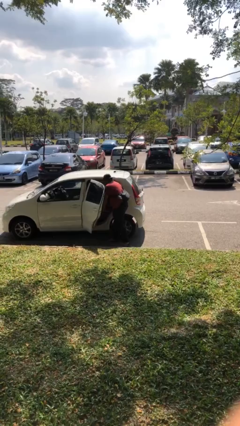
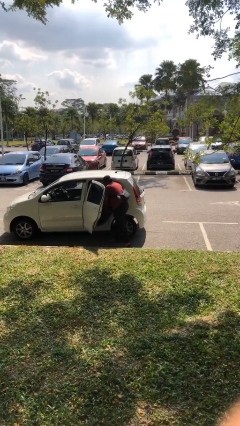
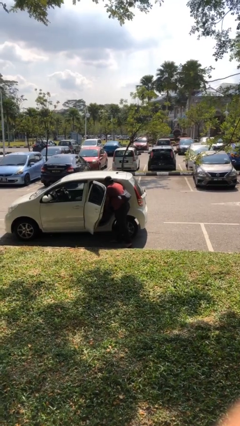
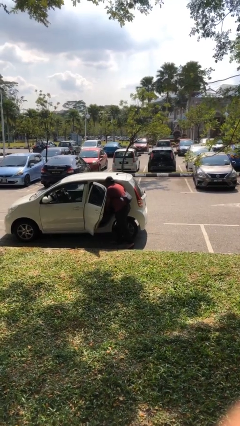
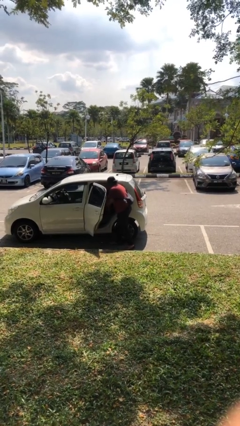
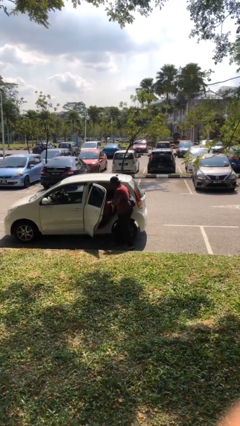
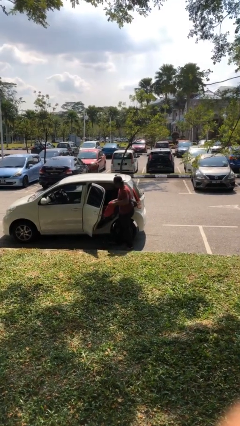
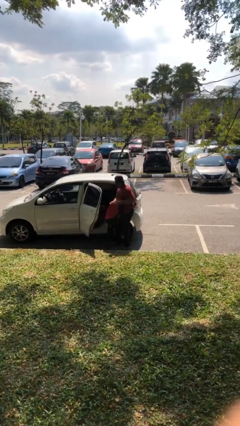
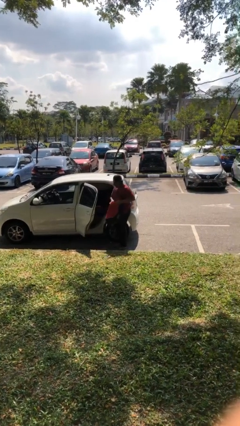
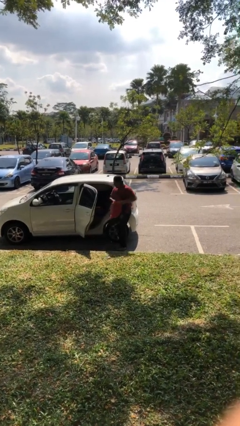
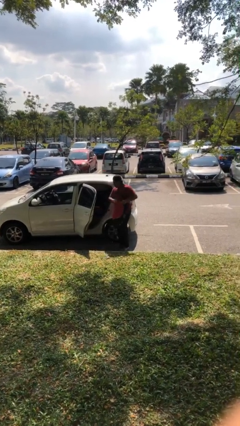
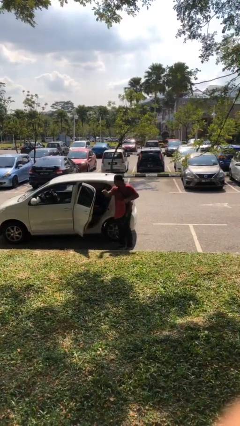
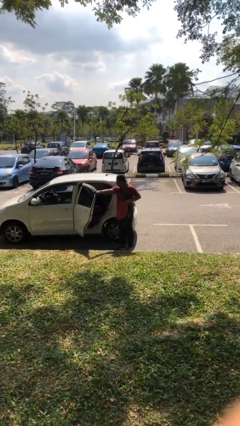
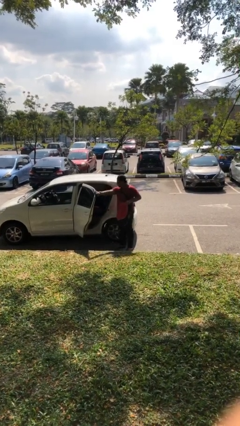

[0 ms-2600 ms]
person unloads car

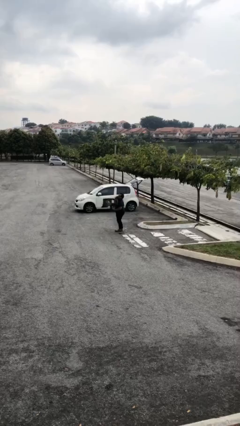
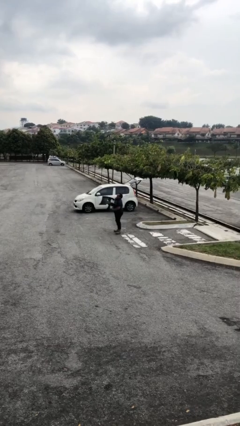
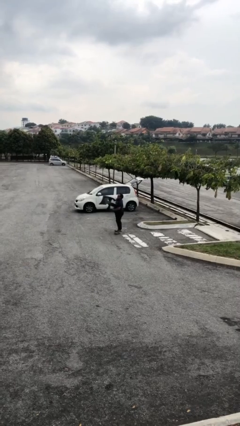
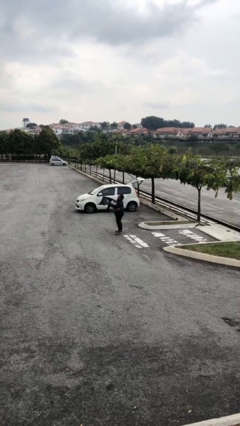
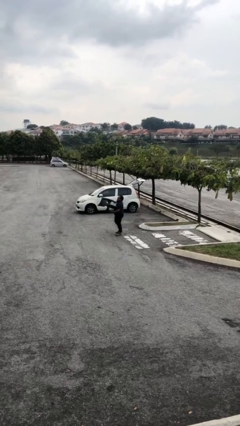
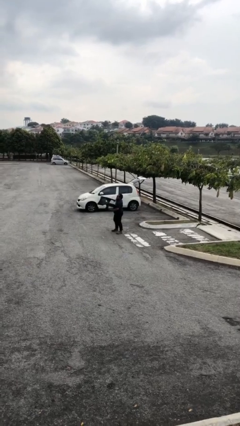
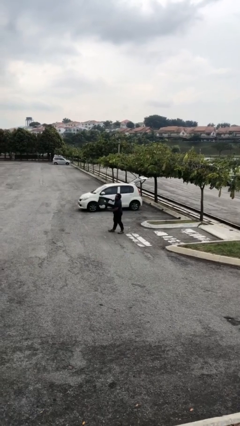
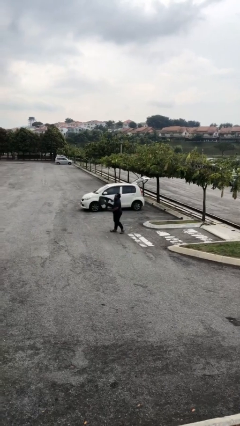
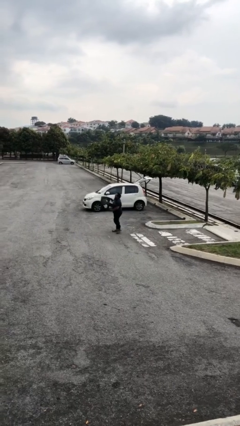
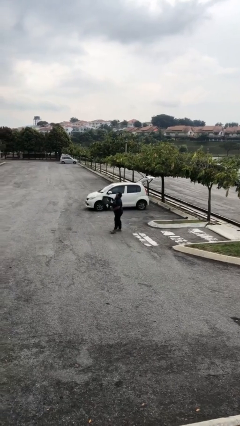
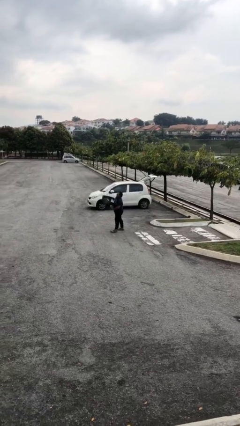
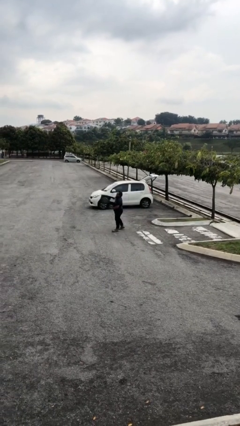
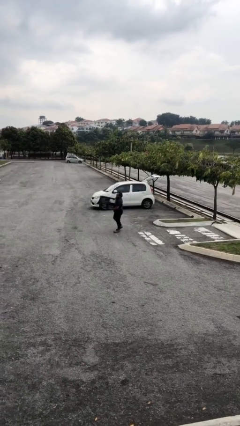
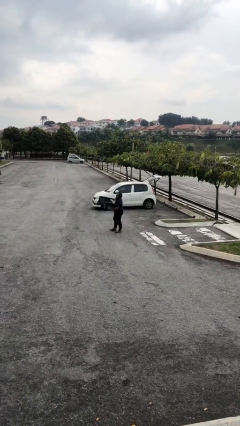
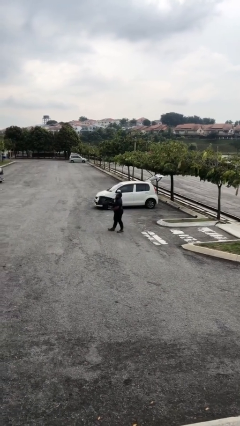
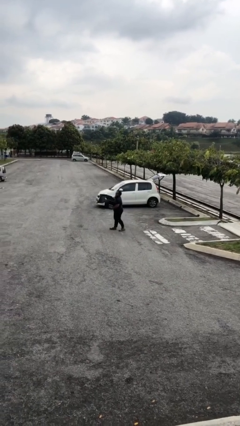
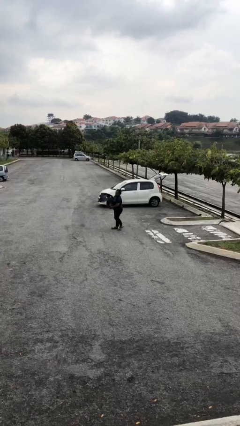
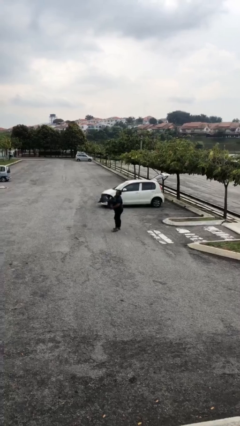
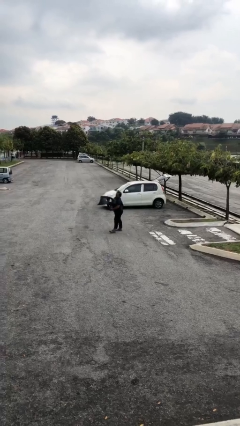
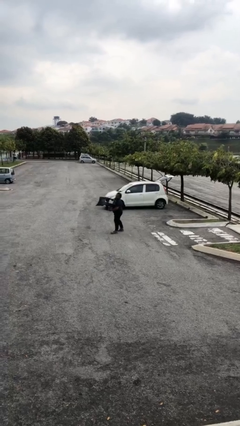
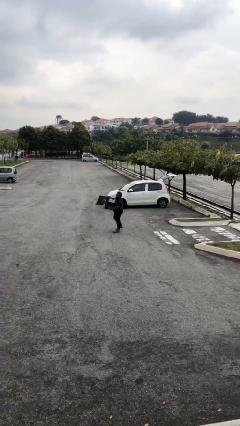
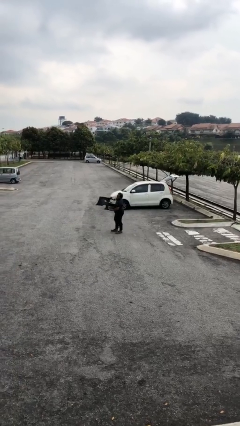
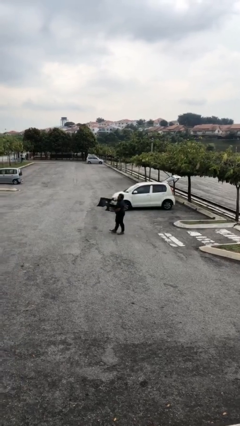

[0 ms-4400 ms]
person carries heavy object

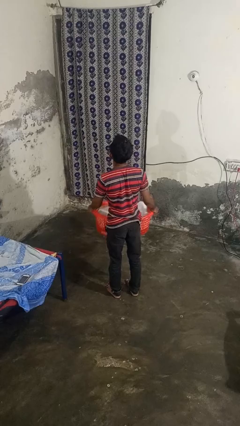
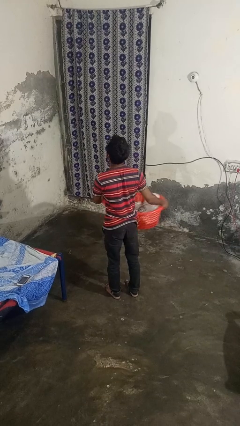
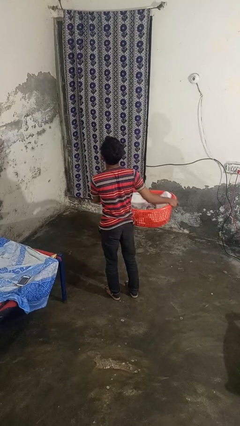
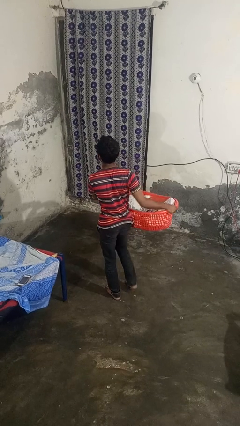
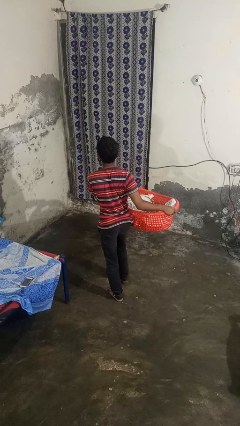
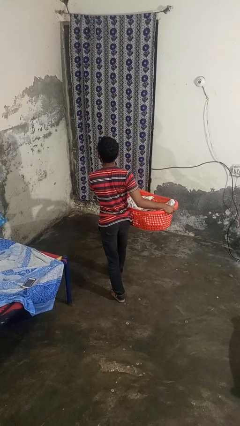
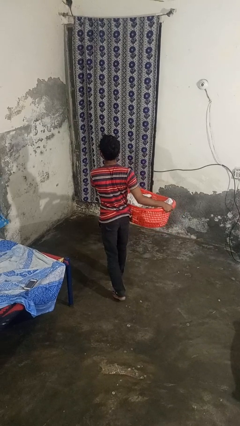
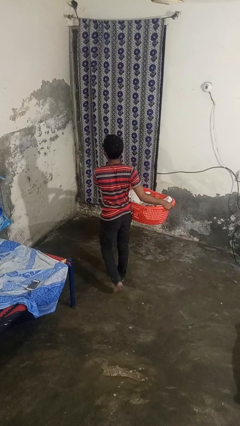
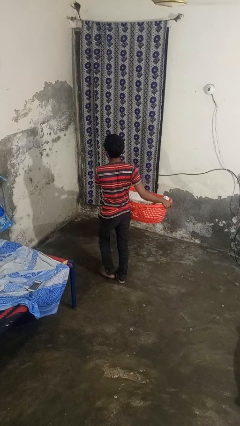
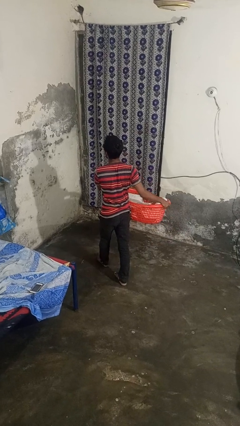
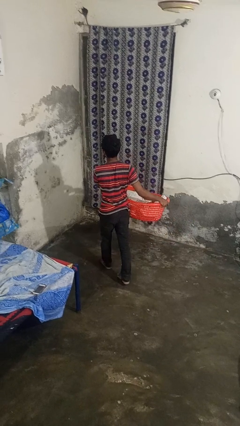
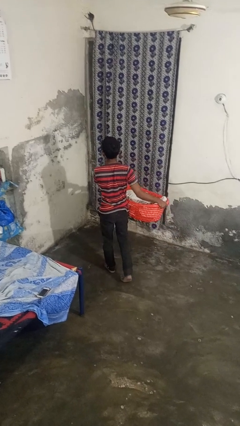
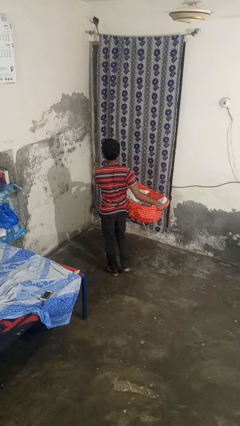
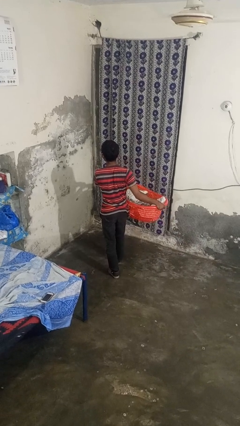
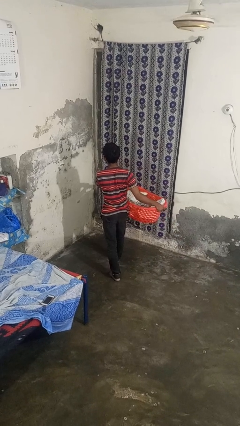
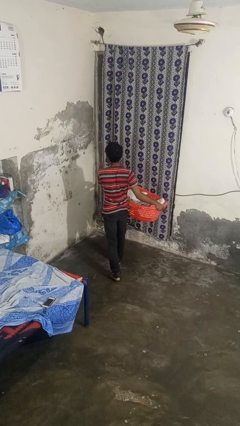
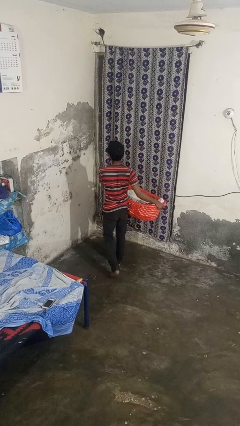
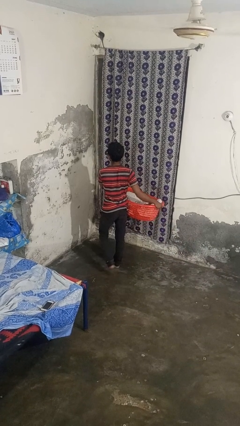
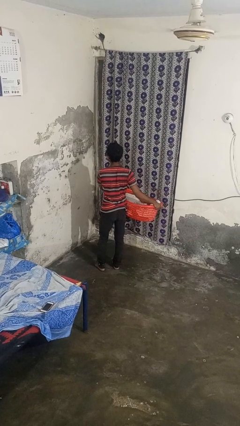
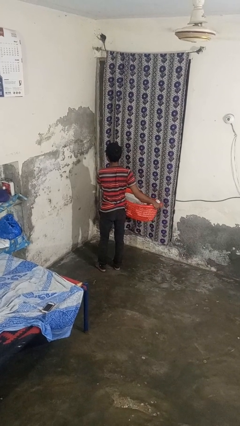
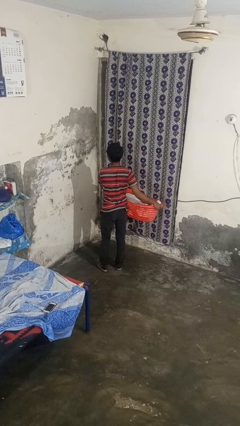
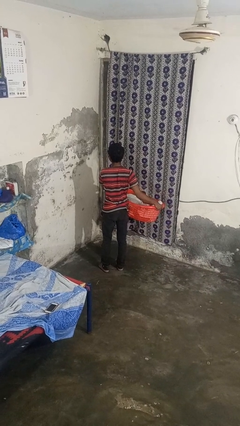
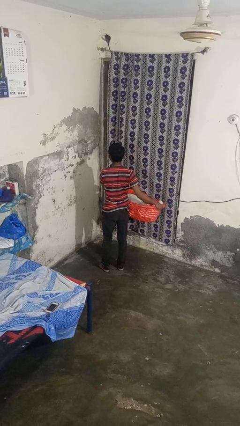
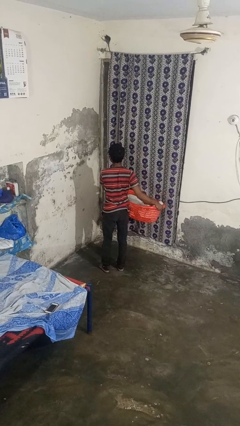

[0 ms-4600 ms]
person carries laundry basket

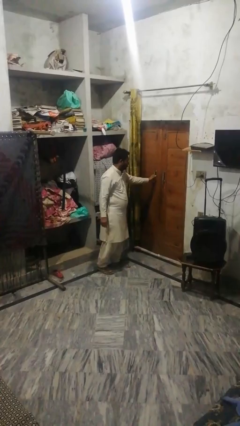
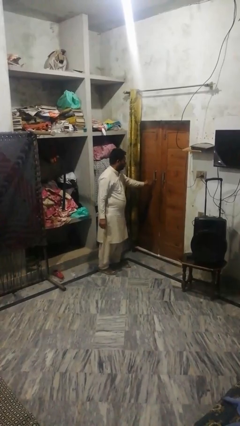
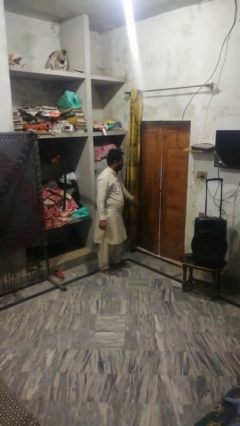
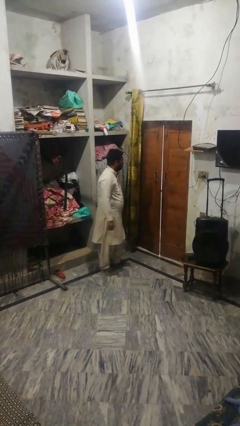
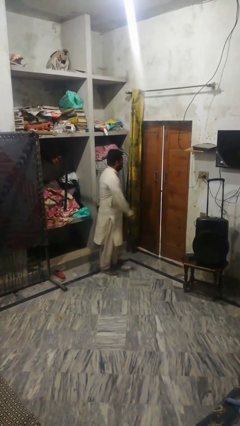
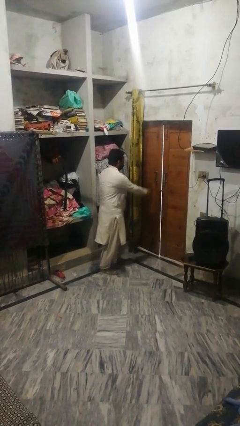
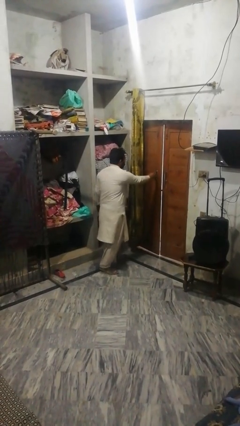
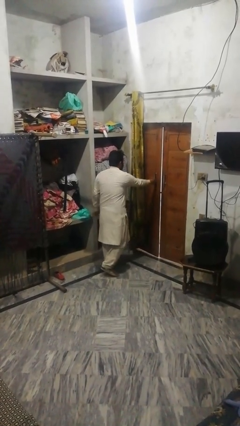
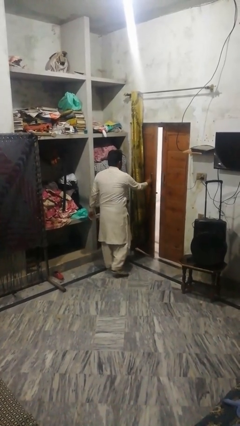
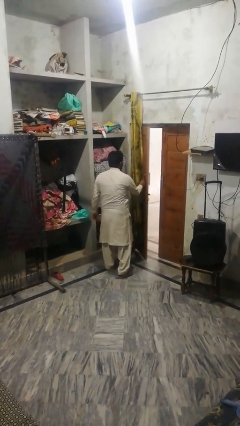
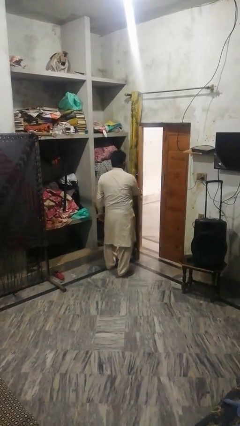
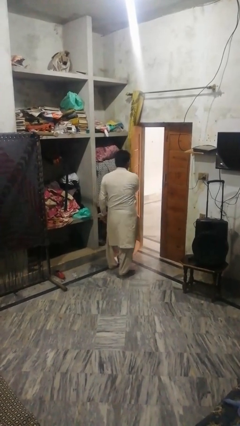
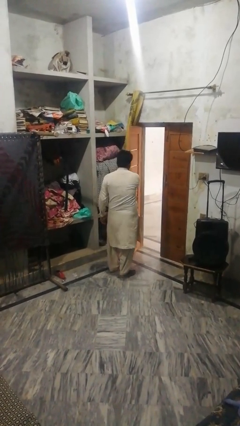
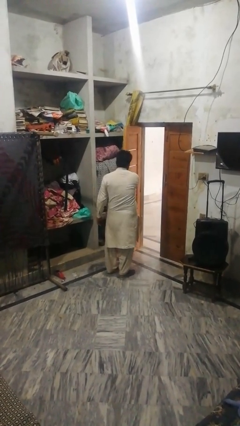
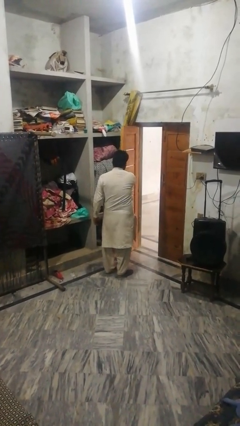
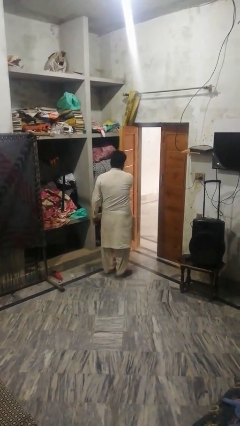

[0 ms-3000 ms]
person opens facility door

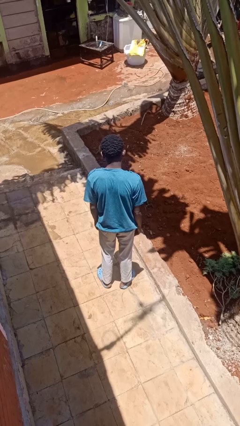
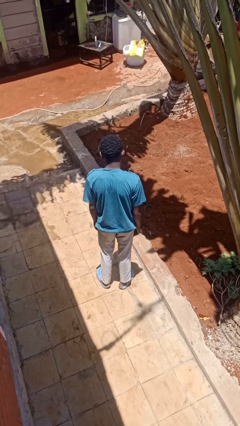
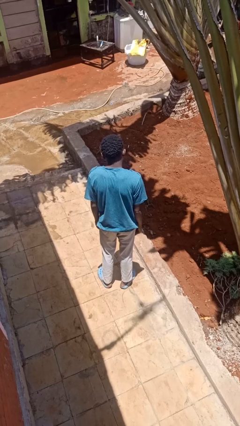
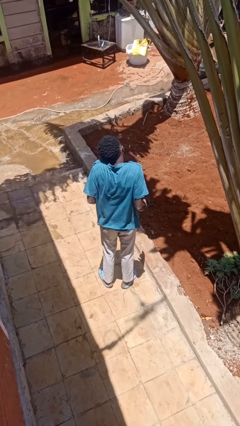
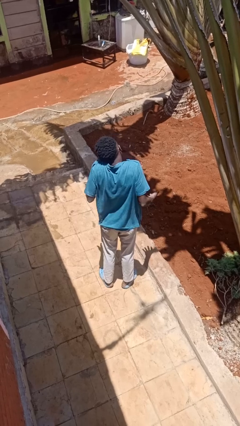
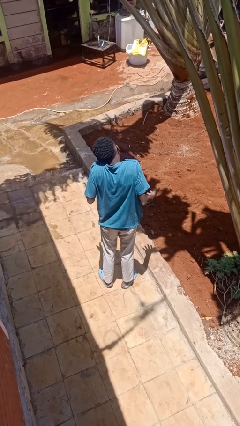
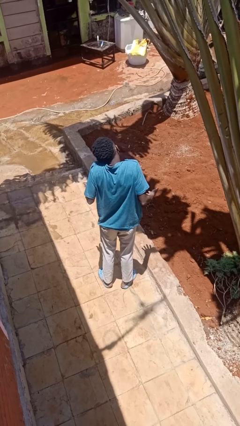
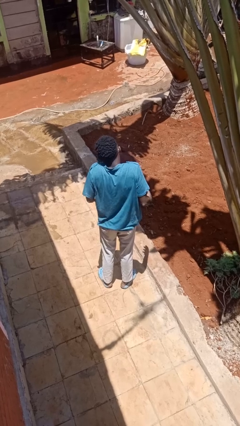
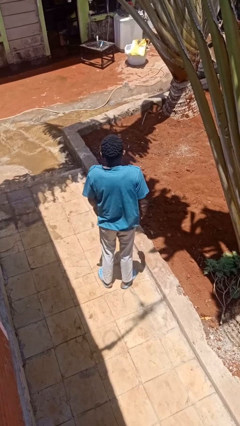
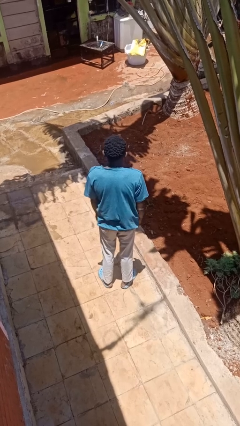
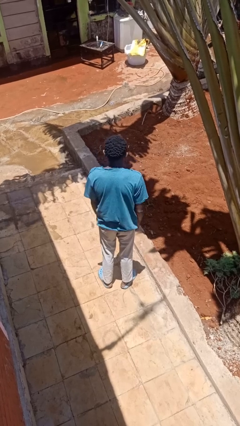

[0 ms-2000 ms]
person shrugs

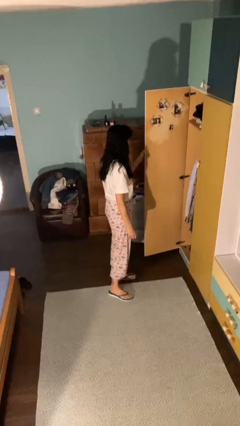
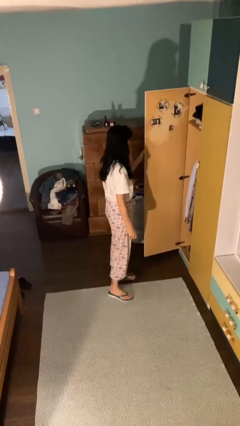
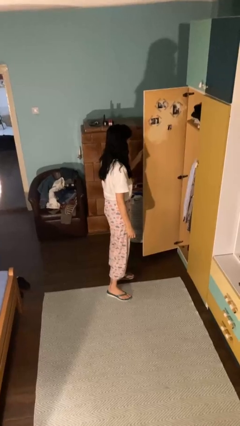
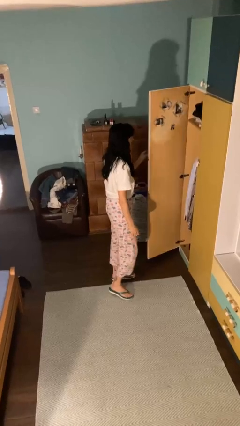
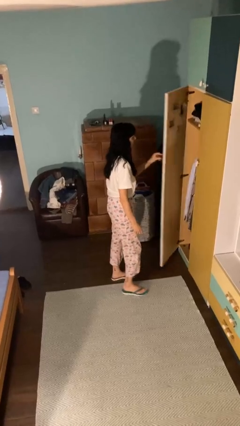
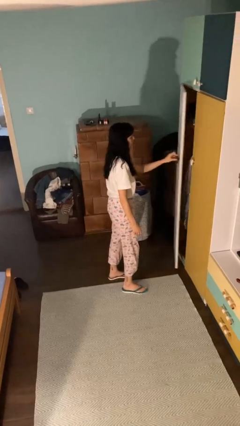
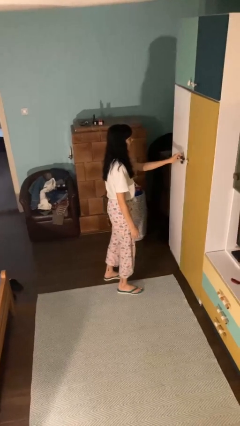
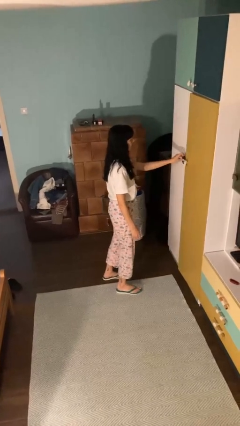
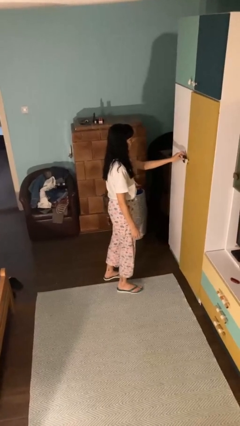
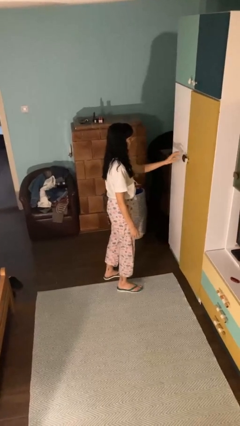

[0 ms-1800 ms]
person closes closet door
